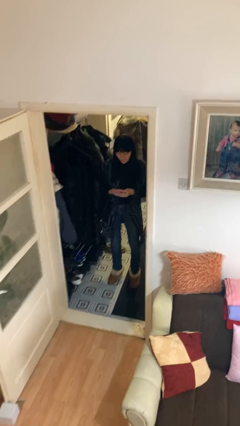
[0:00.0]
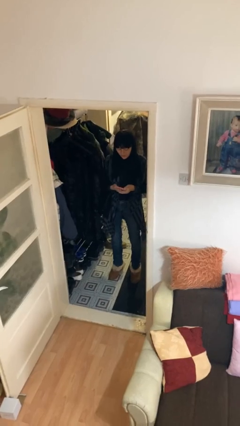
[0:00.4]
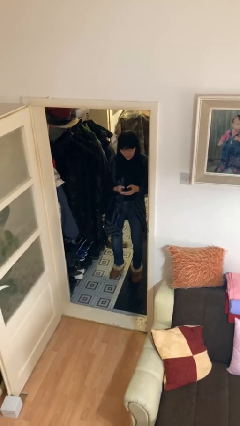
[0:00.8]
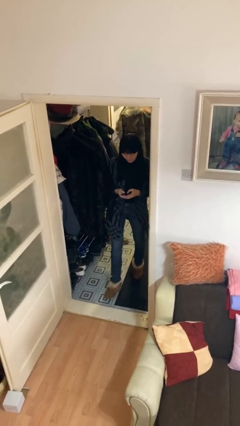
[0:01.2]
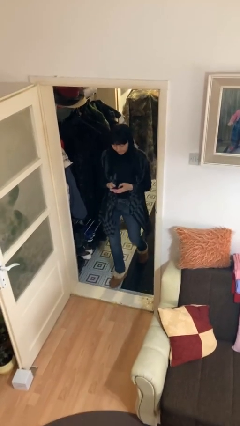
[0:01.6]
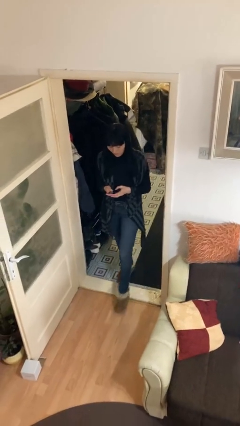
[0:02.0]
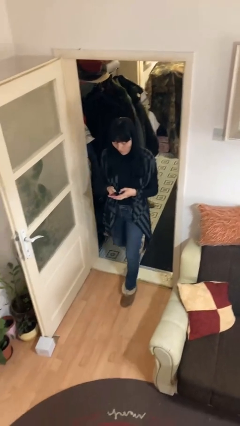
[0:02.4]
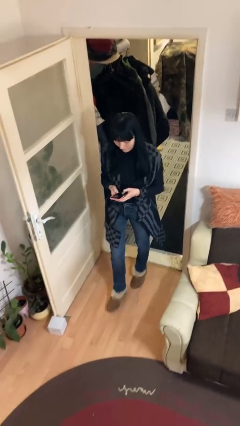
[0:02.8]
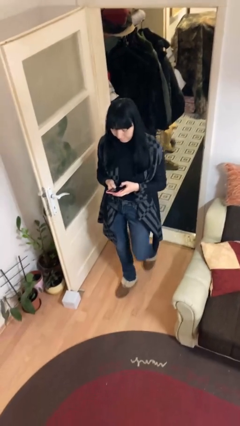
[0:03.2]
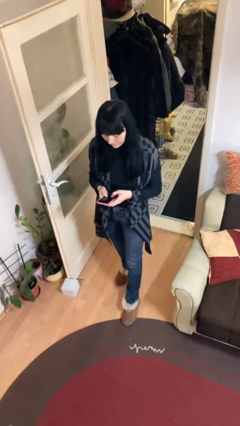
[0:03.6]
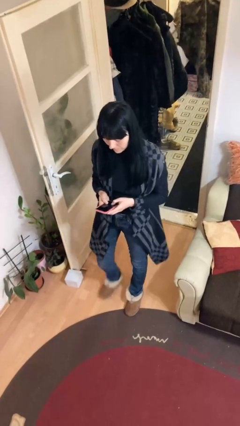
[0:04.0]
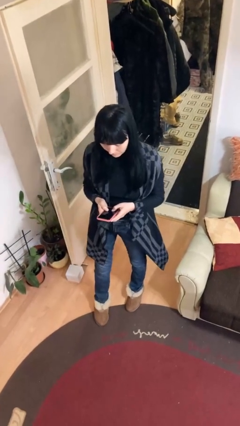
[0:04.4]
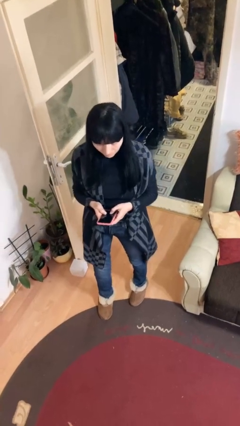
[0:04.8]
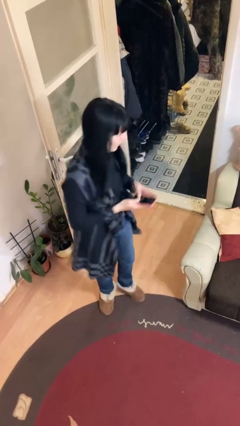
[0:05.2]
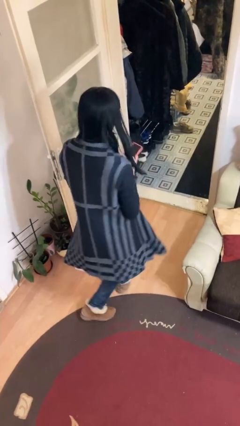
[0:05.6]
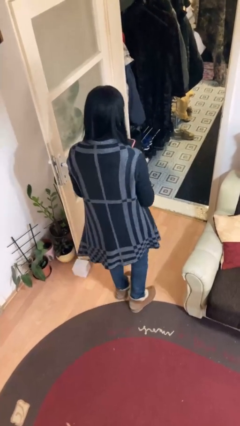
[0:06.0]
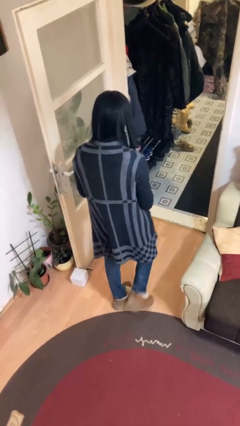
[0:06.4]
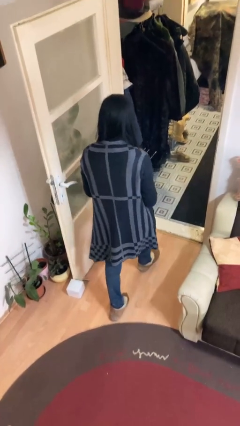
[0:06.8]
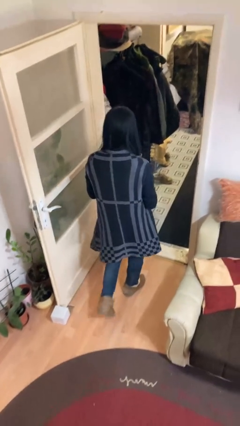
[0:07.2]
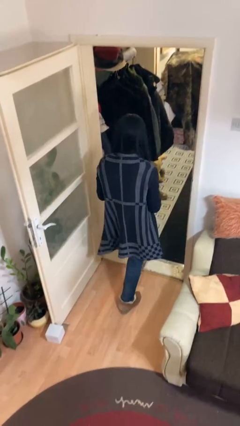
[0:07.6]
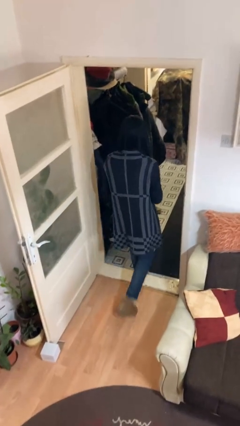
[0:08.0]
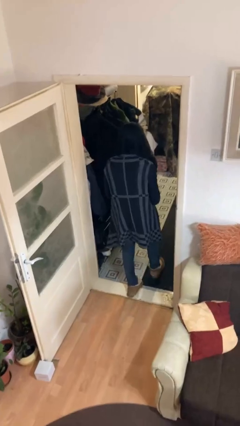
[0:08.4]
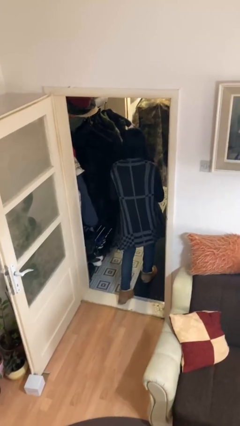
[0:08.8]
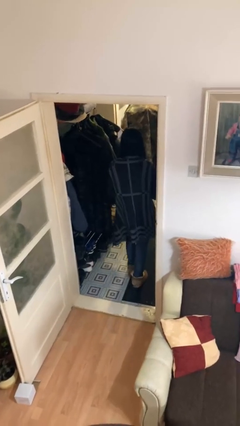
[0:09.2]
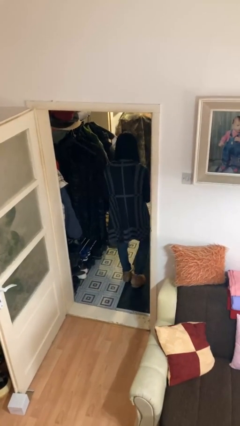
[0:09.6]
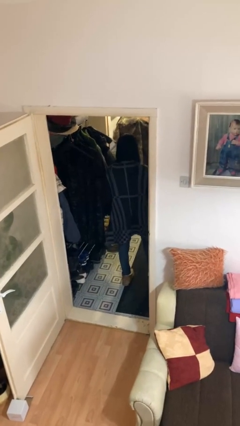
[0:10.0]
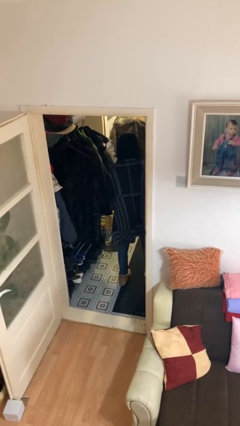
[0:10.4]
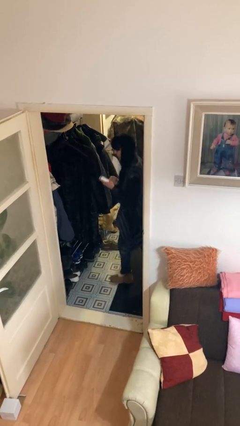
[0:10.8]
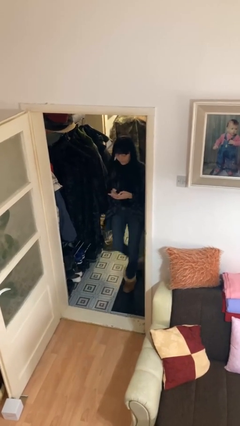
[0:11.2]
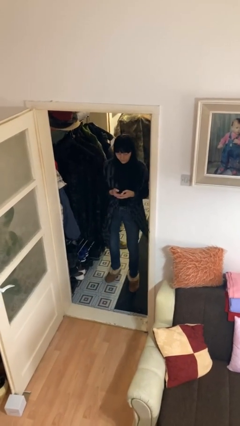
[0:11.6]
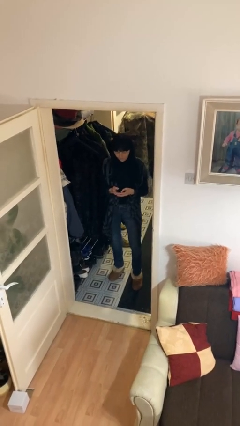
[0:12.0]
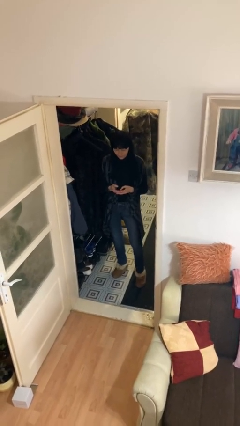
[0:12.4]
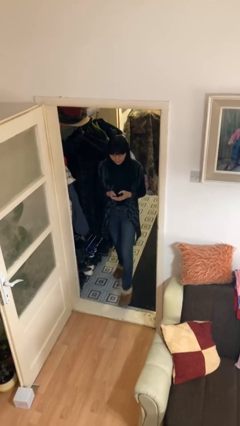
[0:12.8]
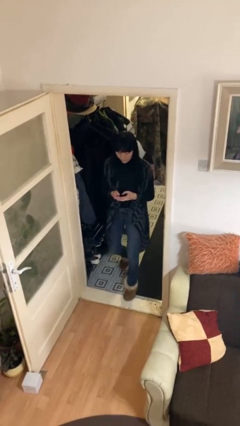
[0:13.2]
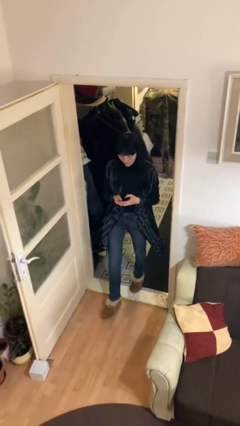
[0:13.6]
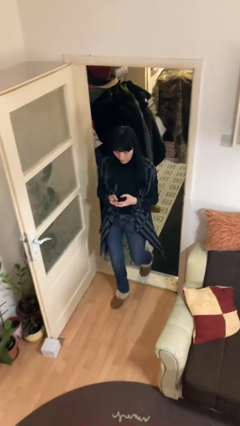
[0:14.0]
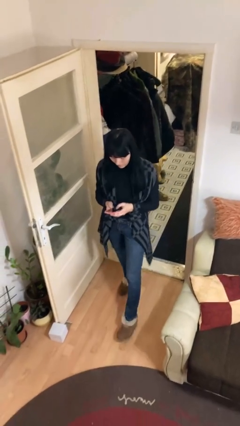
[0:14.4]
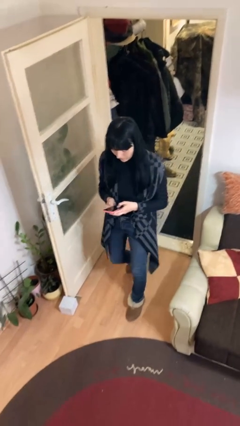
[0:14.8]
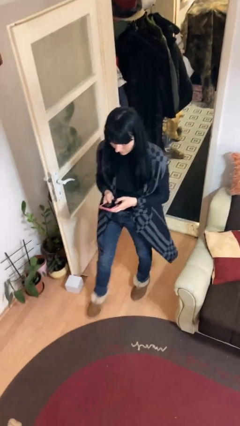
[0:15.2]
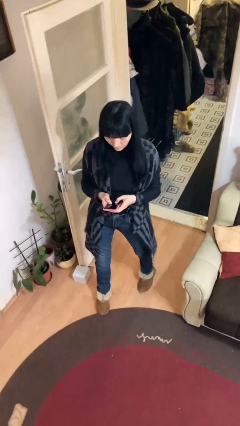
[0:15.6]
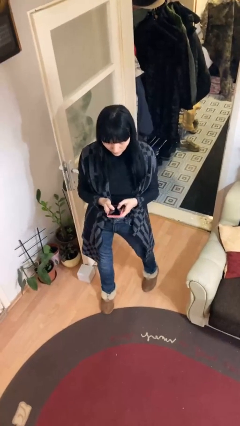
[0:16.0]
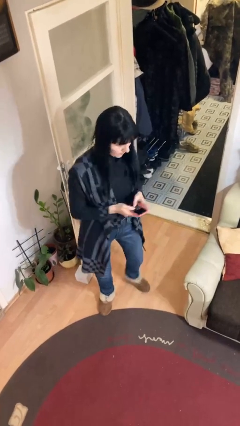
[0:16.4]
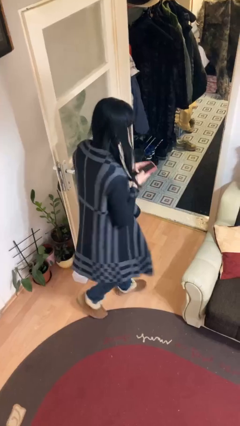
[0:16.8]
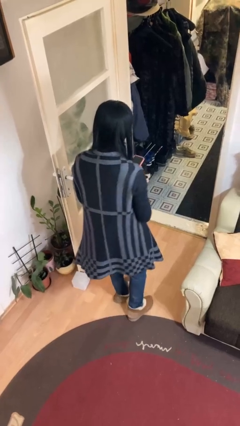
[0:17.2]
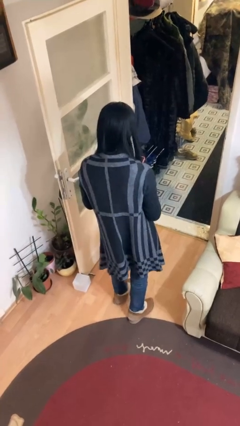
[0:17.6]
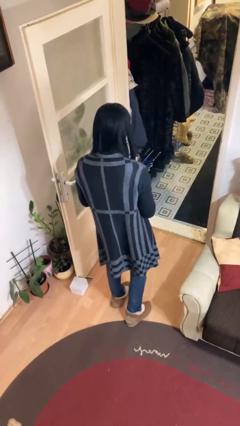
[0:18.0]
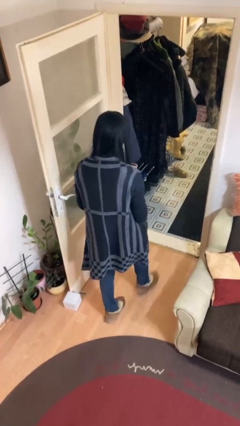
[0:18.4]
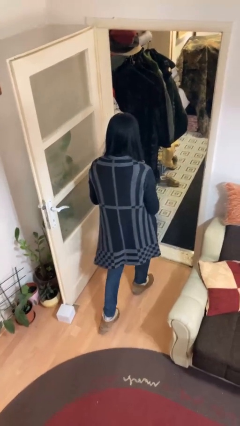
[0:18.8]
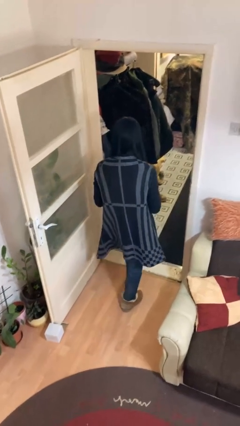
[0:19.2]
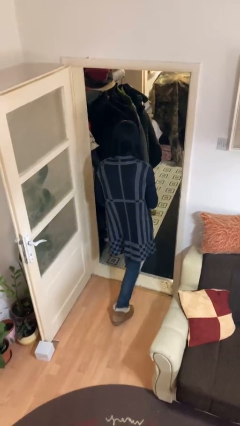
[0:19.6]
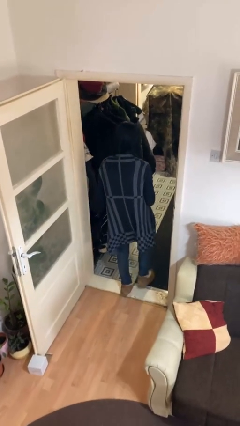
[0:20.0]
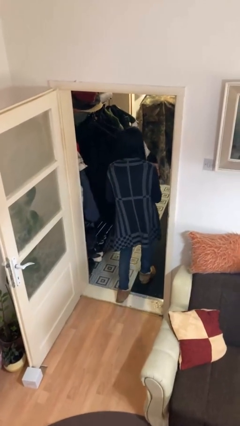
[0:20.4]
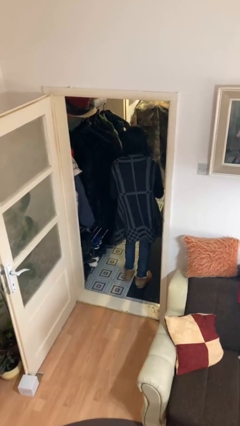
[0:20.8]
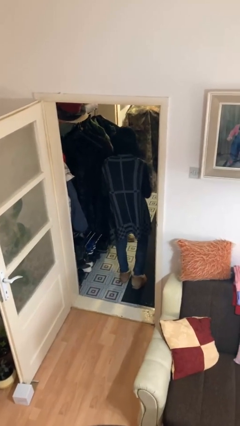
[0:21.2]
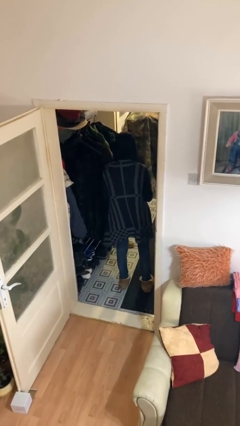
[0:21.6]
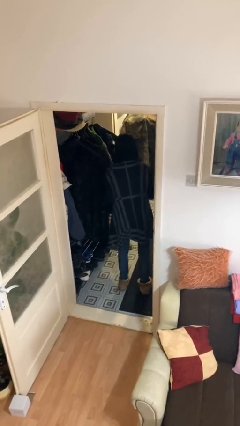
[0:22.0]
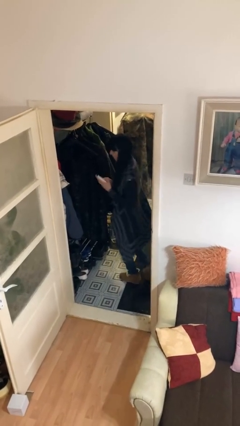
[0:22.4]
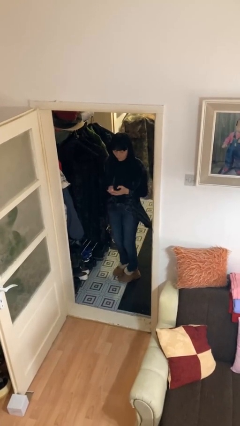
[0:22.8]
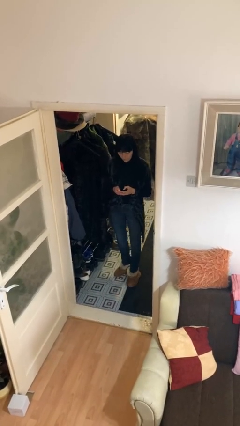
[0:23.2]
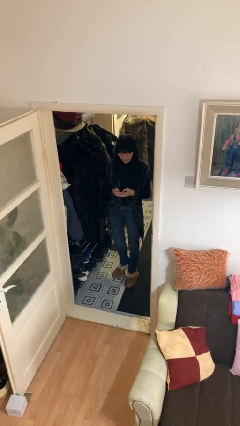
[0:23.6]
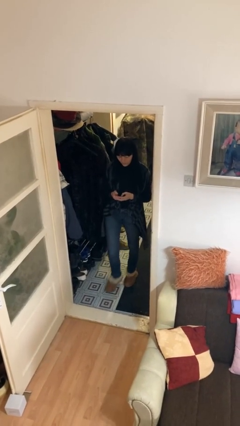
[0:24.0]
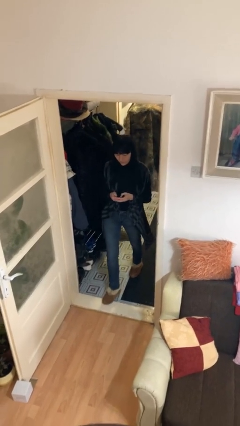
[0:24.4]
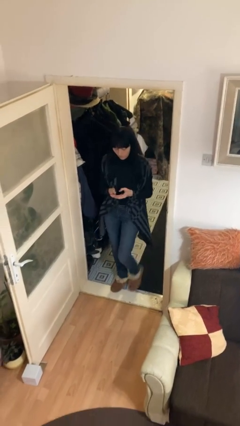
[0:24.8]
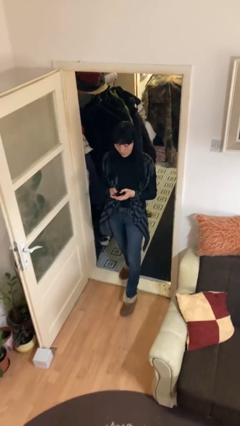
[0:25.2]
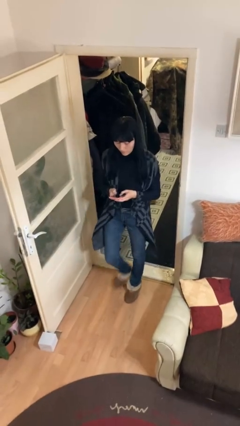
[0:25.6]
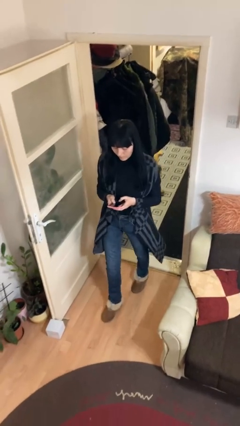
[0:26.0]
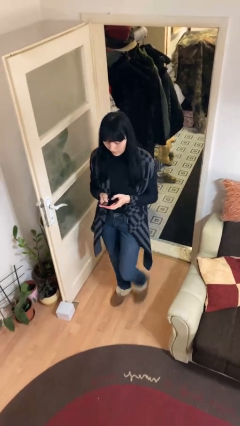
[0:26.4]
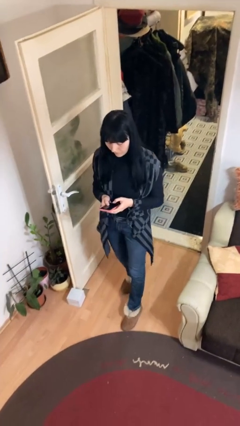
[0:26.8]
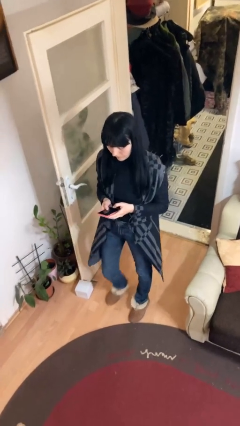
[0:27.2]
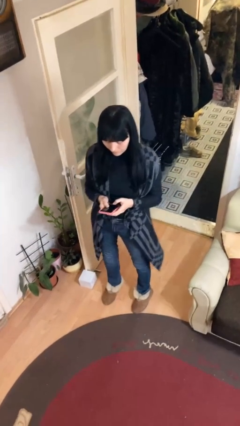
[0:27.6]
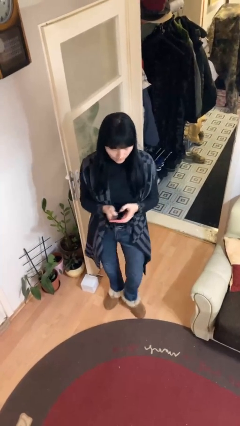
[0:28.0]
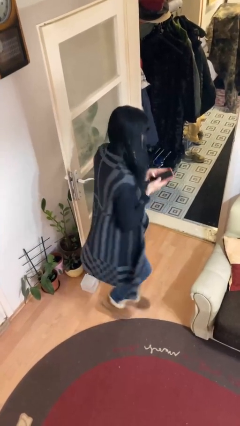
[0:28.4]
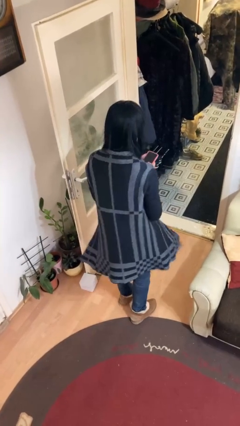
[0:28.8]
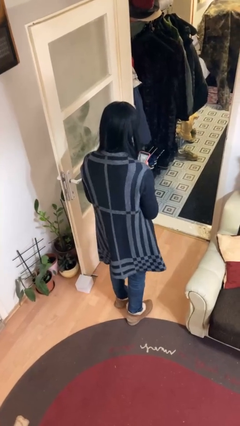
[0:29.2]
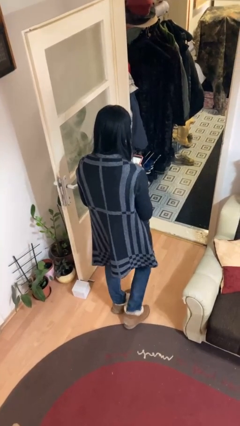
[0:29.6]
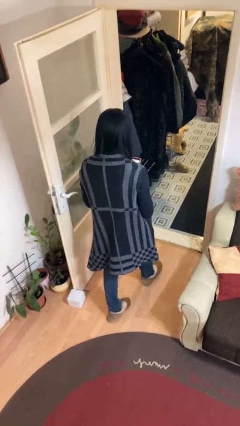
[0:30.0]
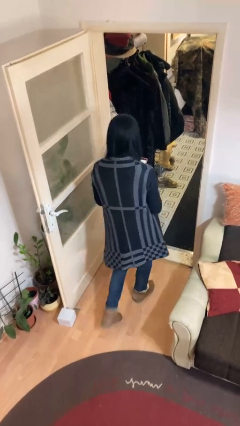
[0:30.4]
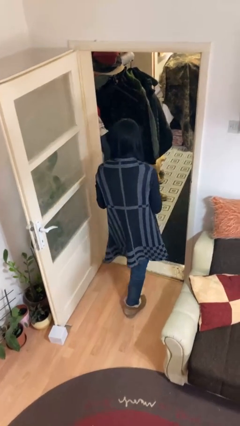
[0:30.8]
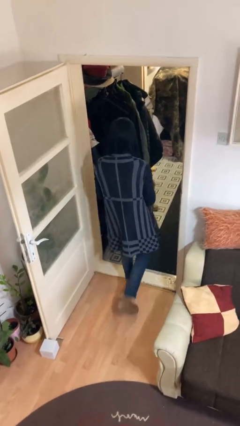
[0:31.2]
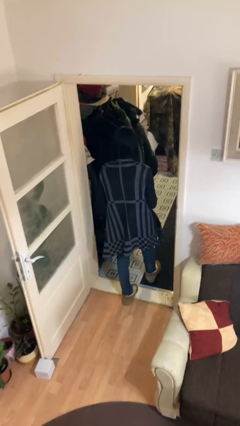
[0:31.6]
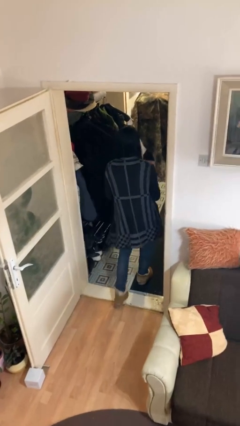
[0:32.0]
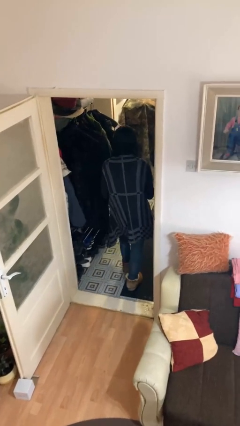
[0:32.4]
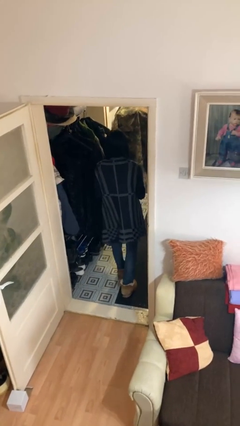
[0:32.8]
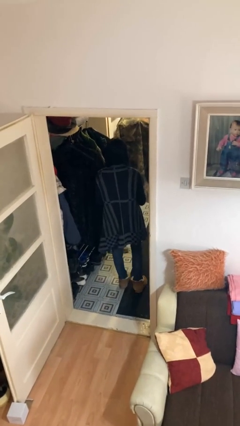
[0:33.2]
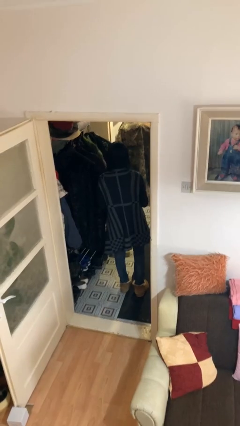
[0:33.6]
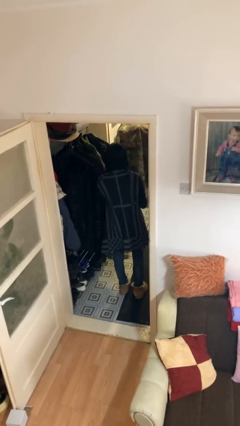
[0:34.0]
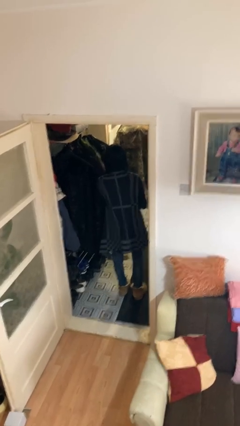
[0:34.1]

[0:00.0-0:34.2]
person texts on phone

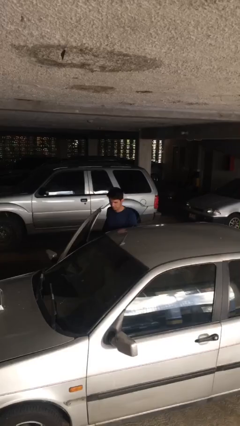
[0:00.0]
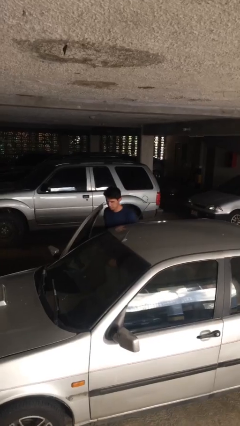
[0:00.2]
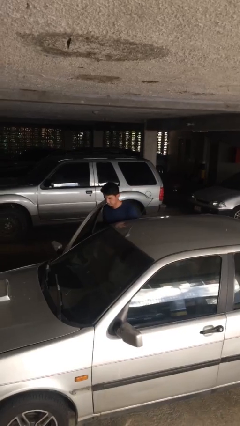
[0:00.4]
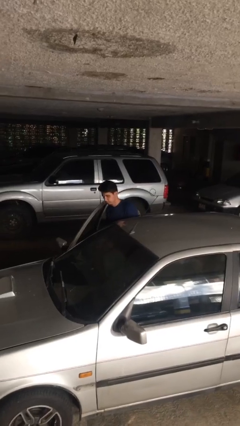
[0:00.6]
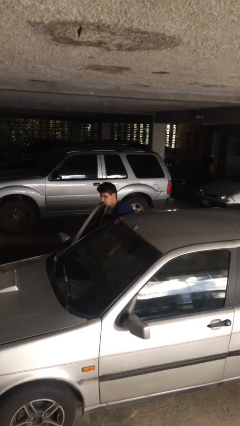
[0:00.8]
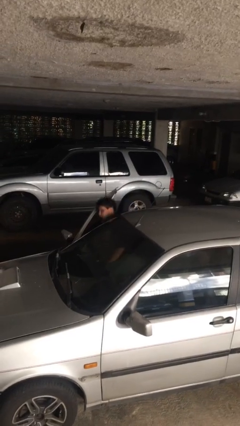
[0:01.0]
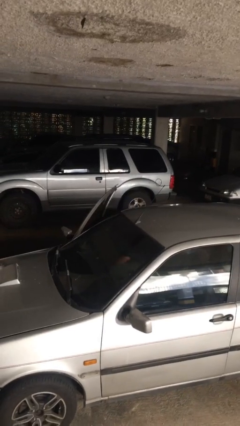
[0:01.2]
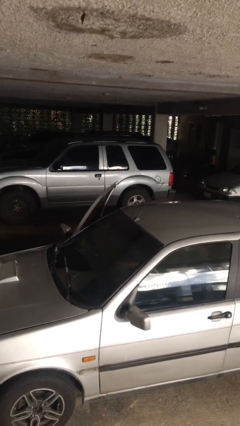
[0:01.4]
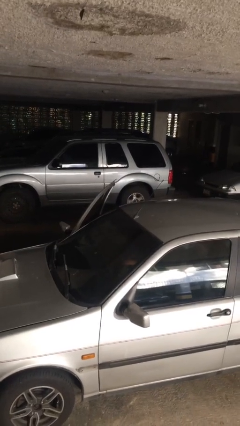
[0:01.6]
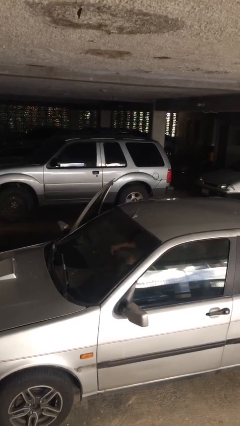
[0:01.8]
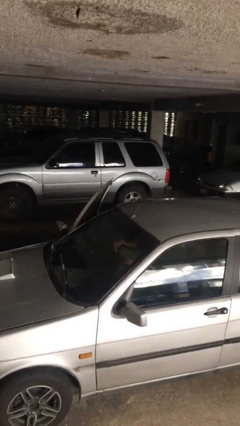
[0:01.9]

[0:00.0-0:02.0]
person enters car
